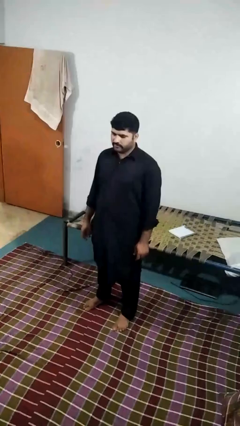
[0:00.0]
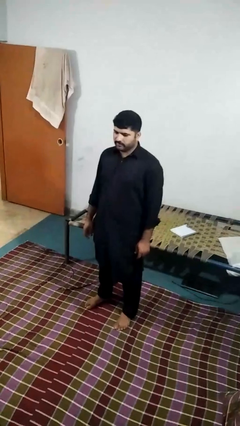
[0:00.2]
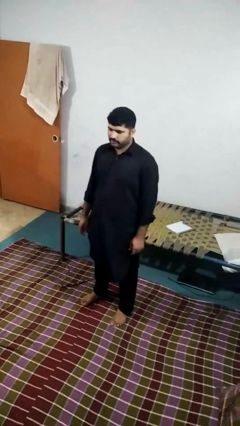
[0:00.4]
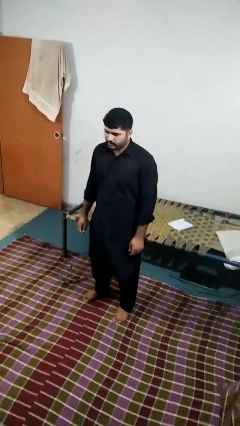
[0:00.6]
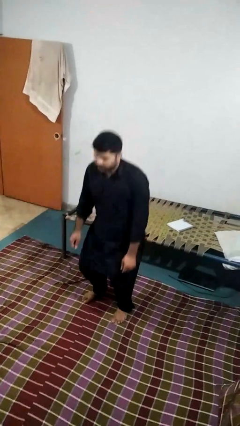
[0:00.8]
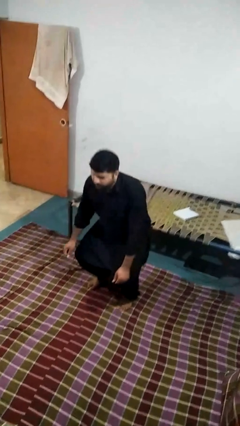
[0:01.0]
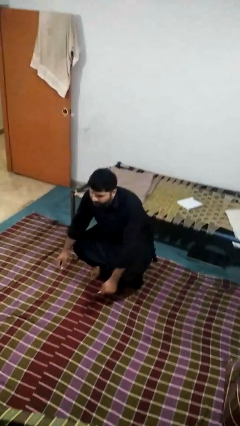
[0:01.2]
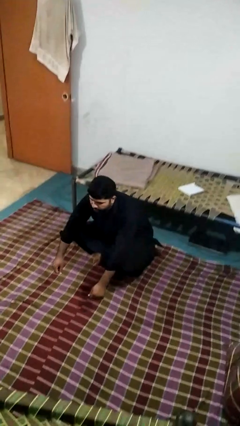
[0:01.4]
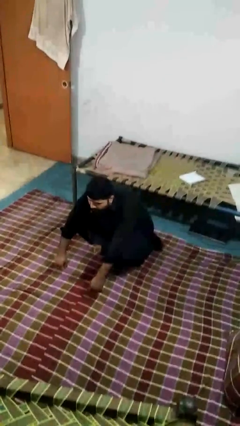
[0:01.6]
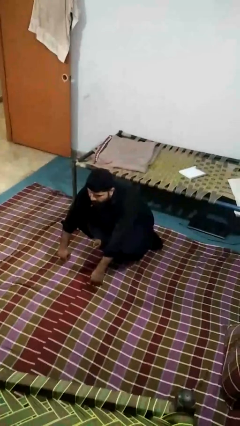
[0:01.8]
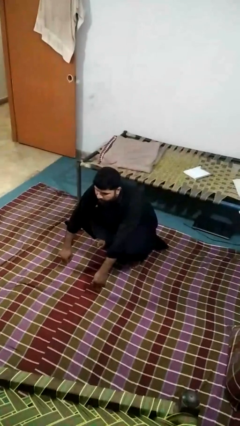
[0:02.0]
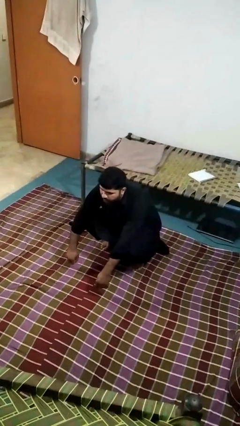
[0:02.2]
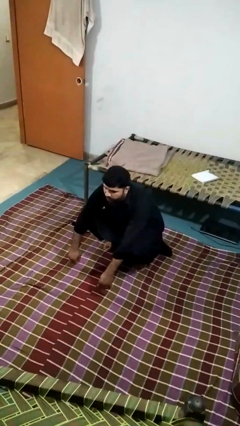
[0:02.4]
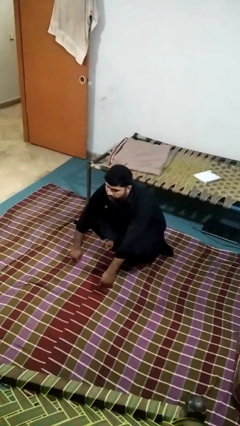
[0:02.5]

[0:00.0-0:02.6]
person squats

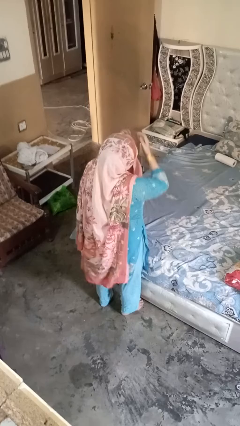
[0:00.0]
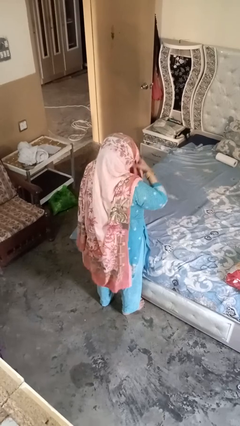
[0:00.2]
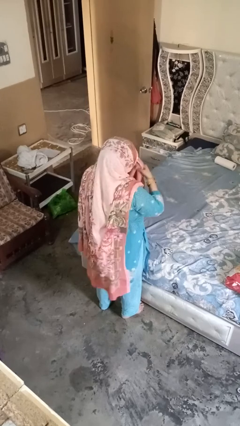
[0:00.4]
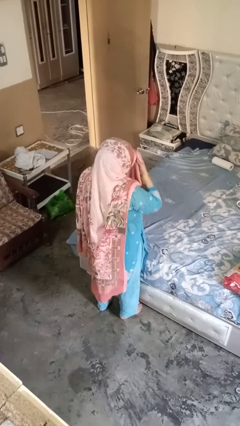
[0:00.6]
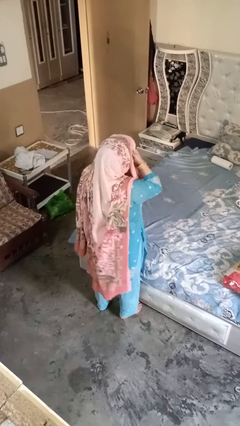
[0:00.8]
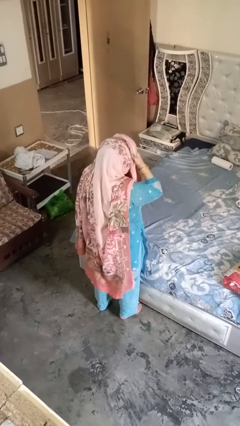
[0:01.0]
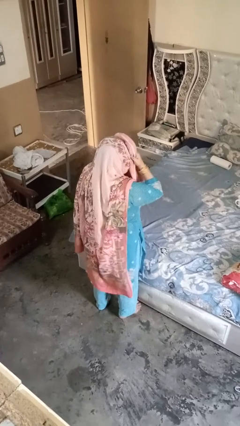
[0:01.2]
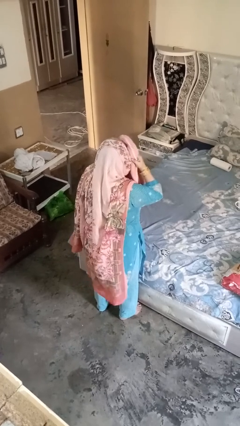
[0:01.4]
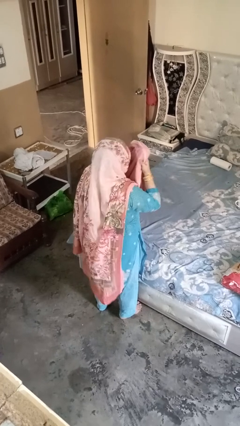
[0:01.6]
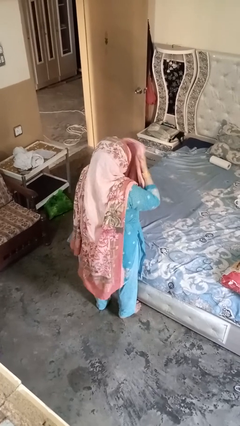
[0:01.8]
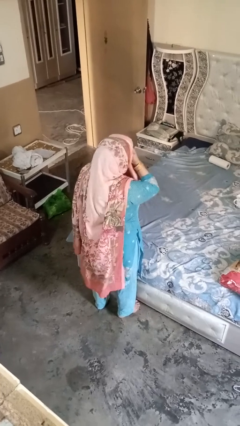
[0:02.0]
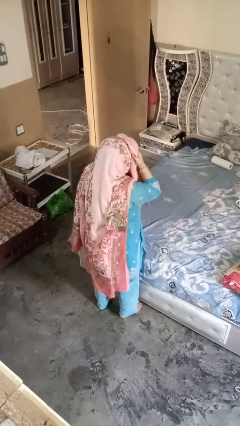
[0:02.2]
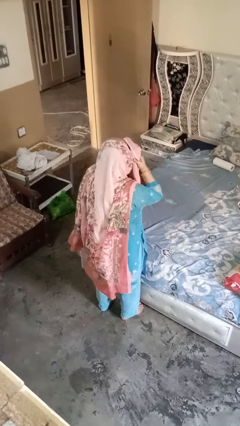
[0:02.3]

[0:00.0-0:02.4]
person dries hair with towel

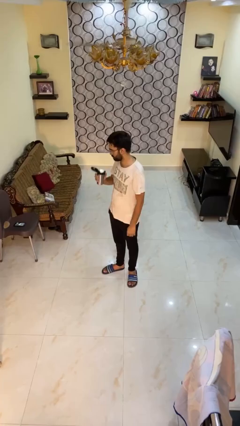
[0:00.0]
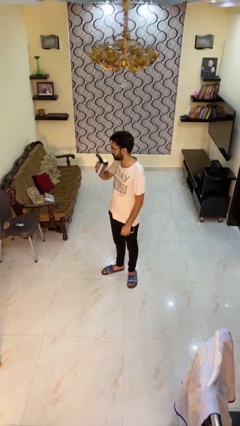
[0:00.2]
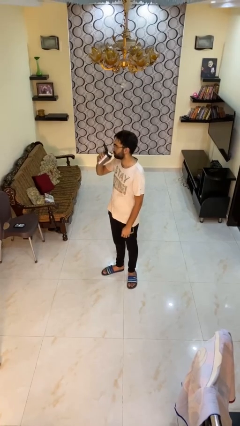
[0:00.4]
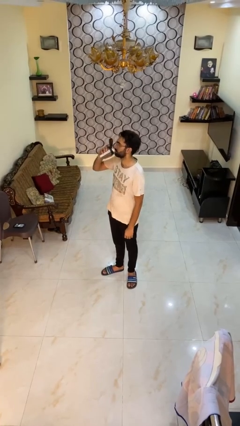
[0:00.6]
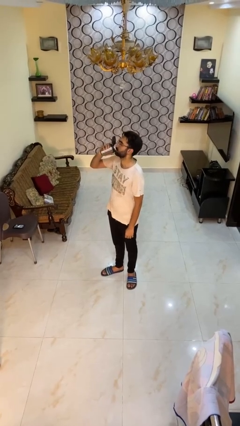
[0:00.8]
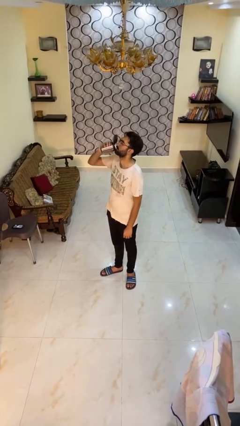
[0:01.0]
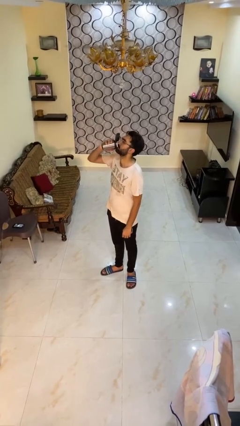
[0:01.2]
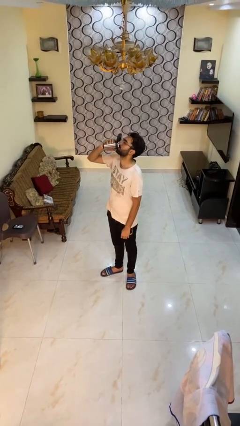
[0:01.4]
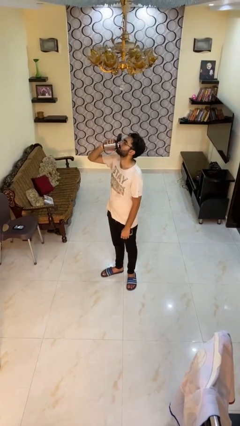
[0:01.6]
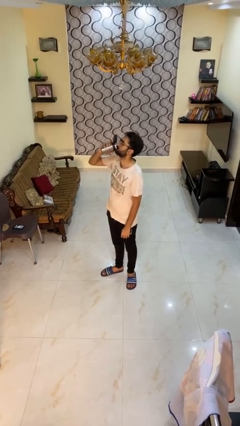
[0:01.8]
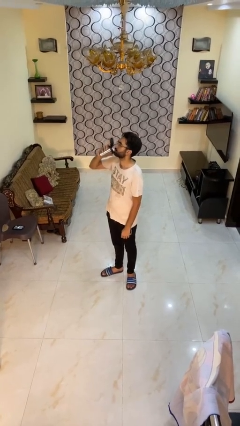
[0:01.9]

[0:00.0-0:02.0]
person drinks from beverage can

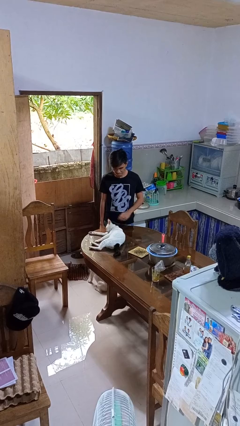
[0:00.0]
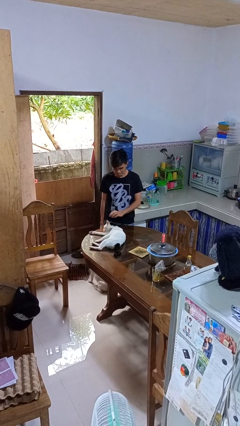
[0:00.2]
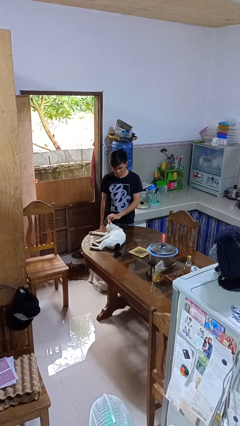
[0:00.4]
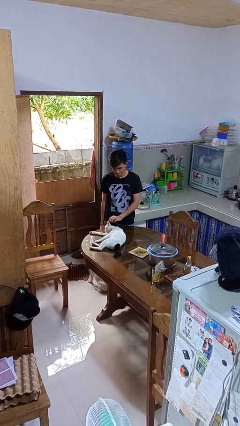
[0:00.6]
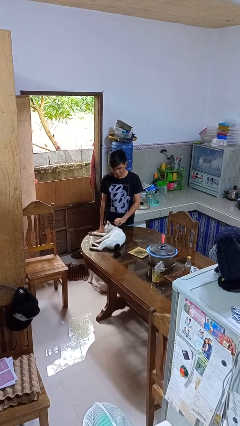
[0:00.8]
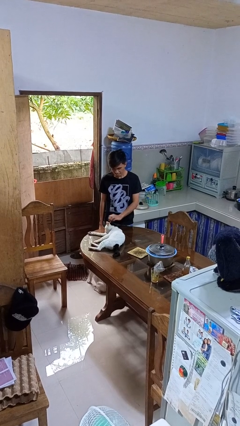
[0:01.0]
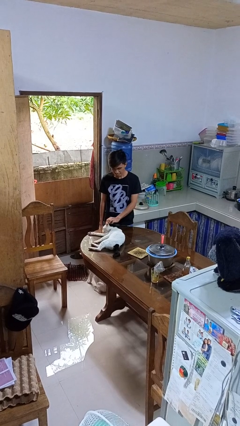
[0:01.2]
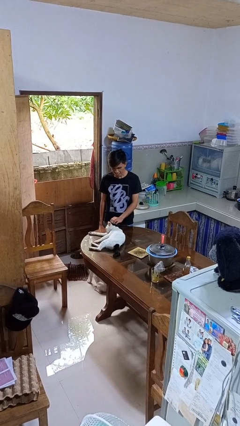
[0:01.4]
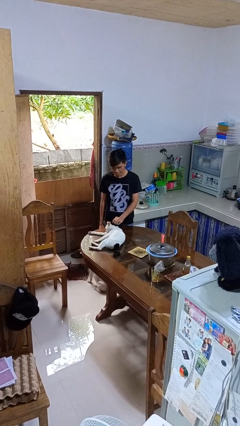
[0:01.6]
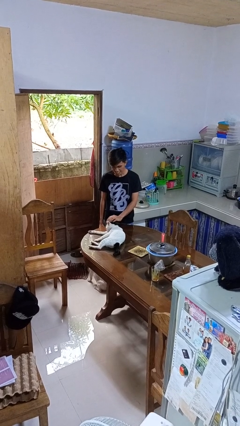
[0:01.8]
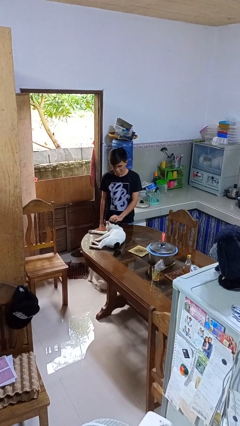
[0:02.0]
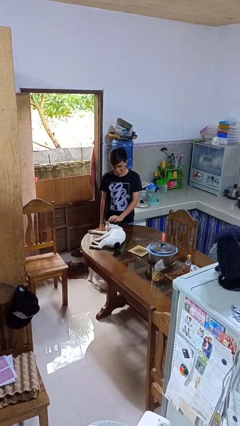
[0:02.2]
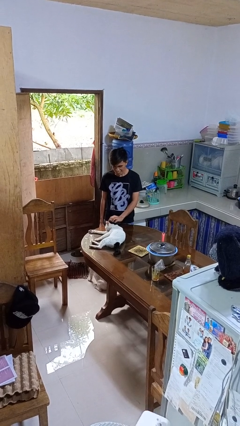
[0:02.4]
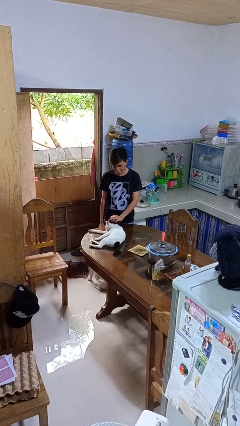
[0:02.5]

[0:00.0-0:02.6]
person pets cat

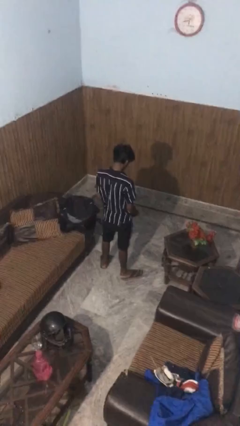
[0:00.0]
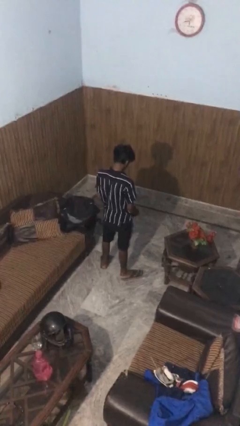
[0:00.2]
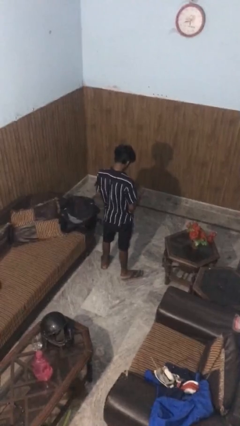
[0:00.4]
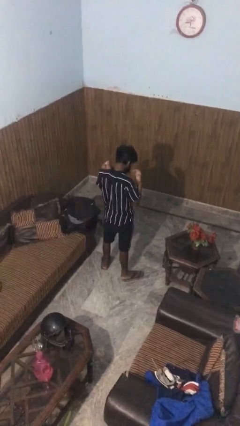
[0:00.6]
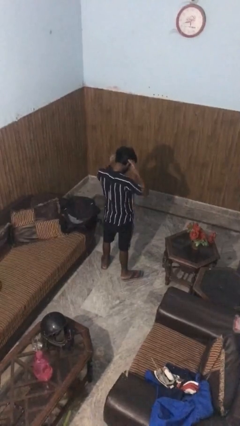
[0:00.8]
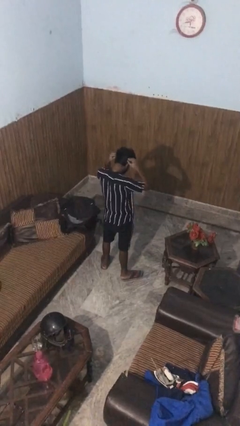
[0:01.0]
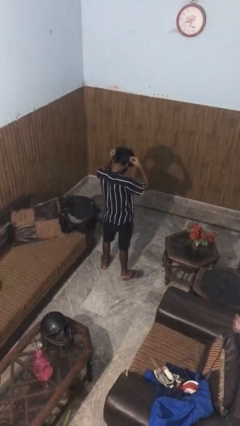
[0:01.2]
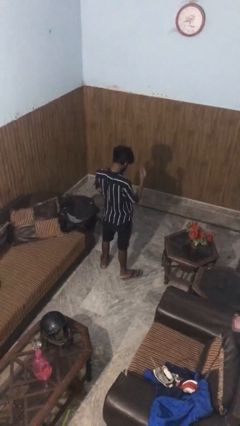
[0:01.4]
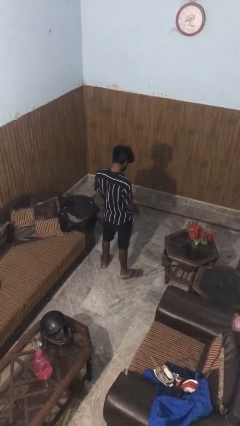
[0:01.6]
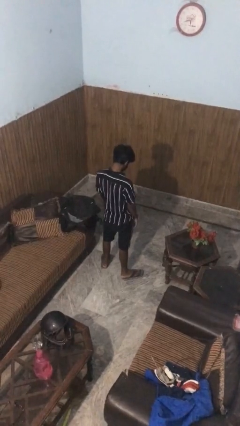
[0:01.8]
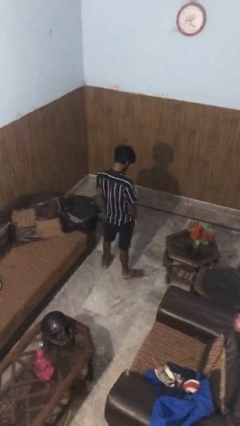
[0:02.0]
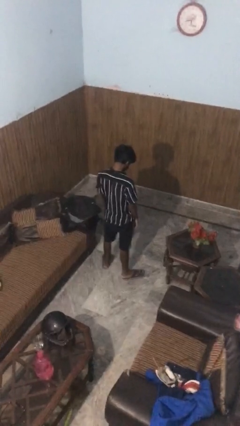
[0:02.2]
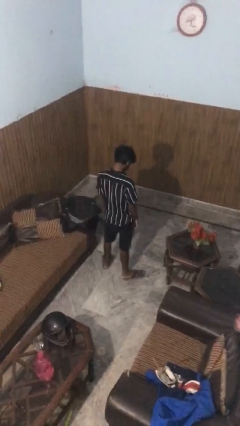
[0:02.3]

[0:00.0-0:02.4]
person puts on facemask

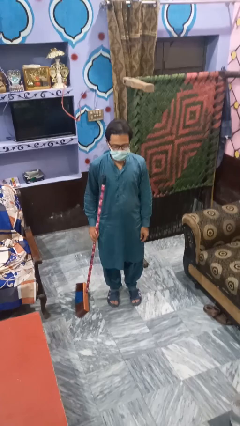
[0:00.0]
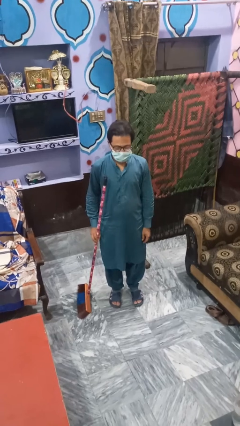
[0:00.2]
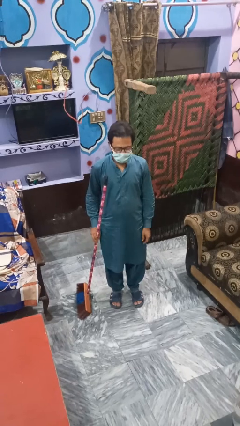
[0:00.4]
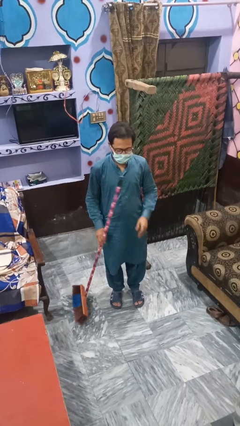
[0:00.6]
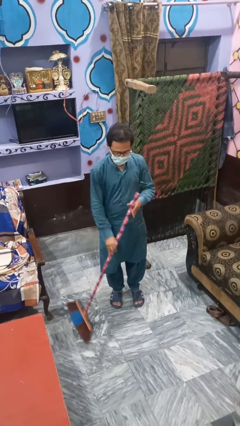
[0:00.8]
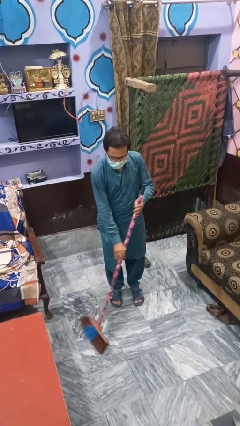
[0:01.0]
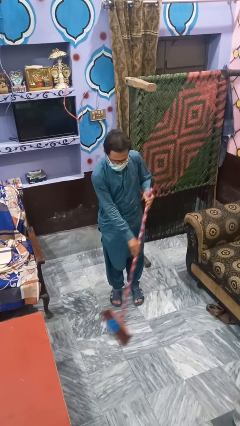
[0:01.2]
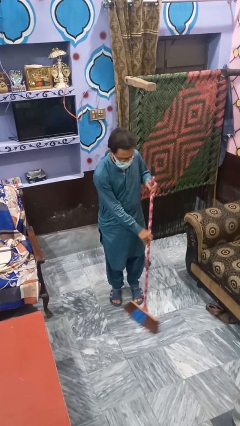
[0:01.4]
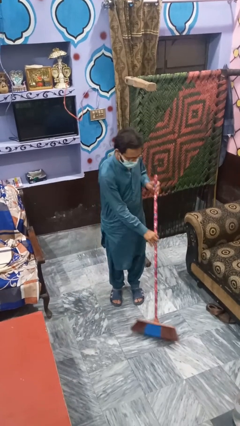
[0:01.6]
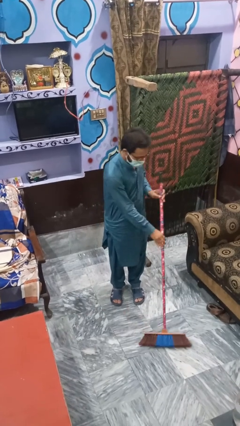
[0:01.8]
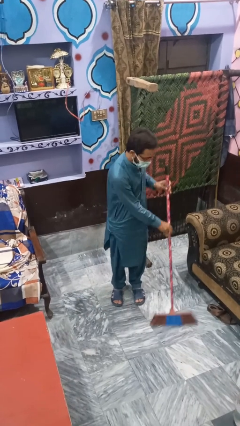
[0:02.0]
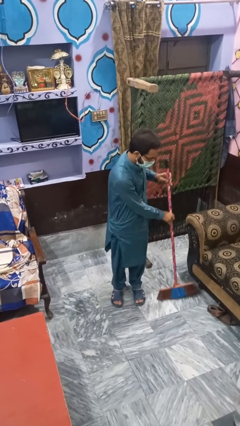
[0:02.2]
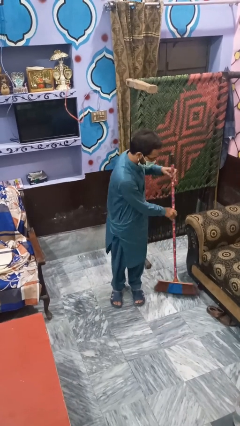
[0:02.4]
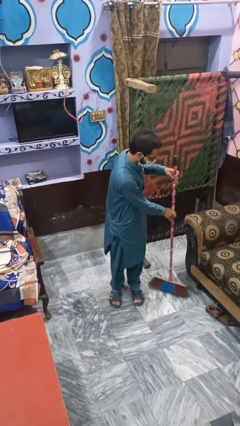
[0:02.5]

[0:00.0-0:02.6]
person mops

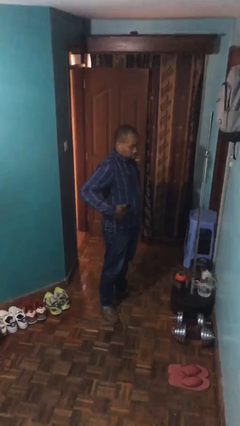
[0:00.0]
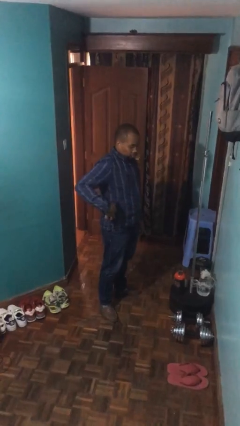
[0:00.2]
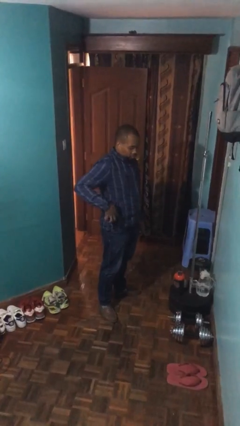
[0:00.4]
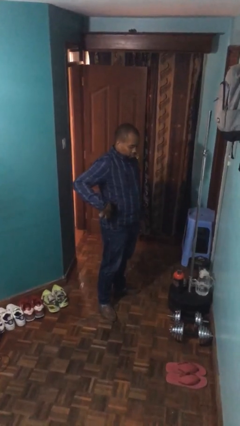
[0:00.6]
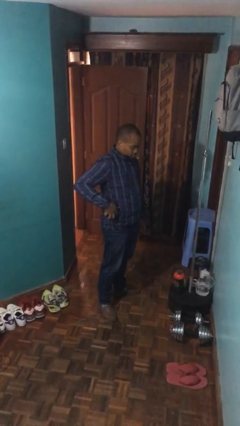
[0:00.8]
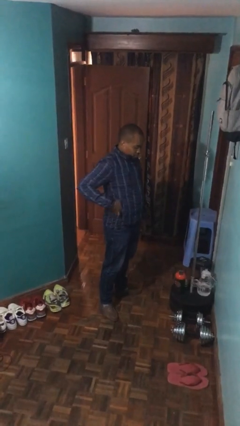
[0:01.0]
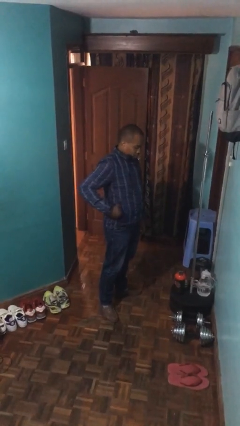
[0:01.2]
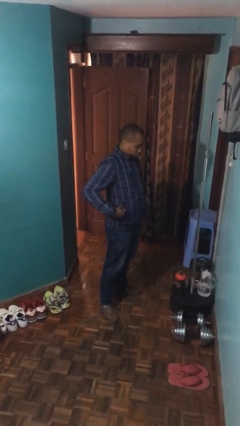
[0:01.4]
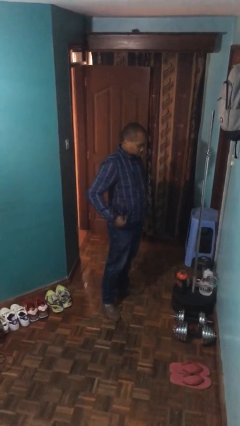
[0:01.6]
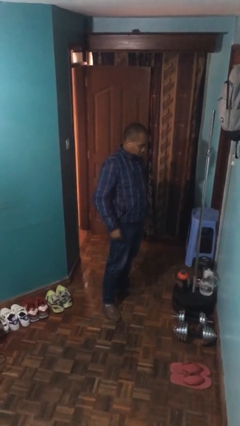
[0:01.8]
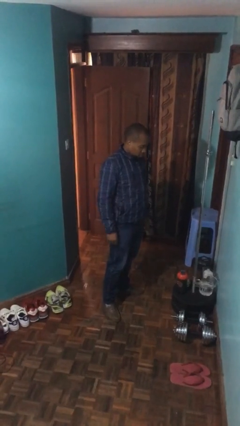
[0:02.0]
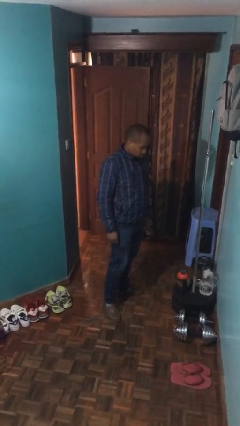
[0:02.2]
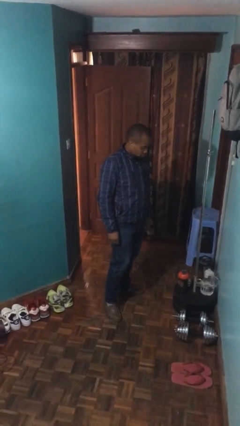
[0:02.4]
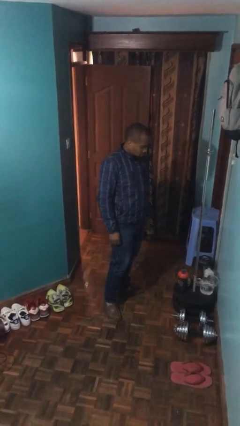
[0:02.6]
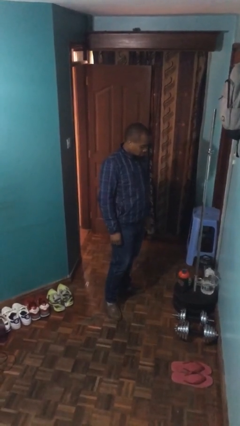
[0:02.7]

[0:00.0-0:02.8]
person puts phone into pocket
